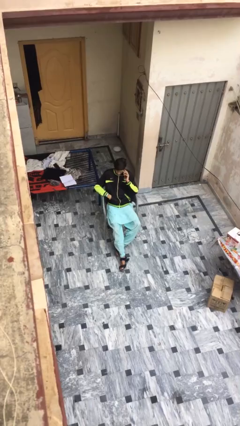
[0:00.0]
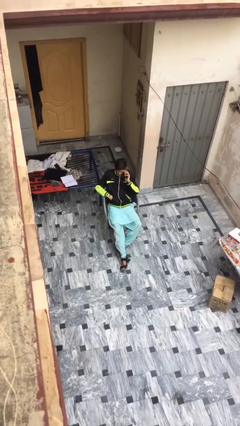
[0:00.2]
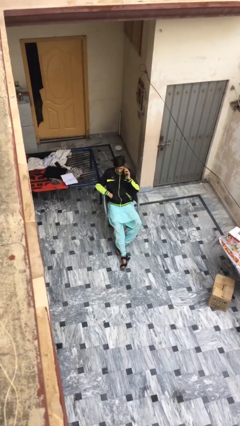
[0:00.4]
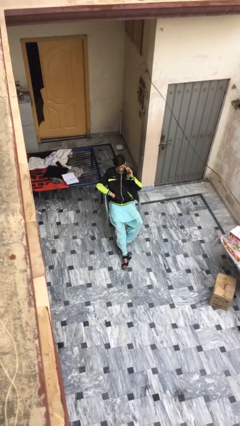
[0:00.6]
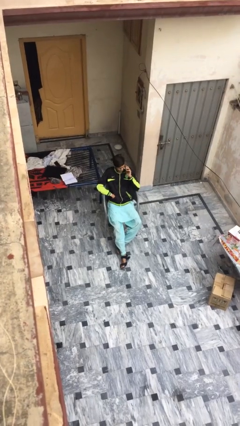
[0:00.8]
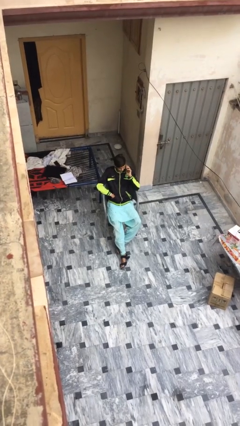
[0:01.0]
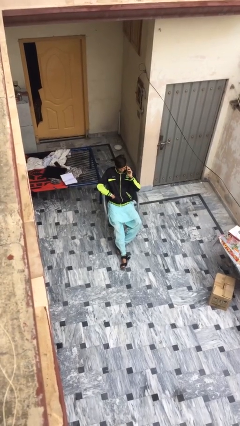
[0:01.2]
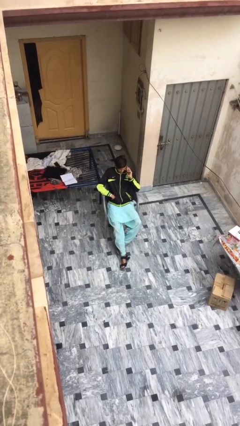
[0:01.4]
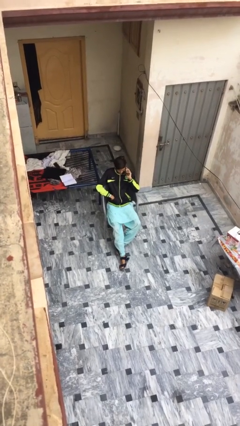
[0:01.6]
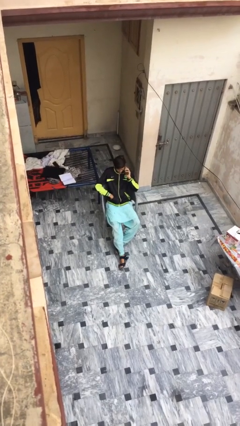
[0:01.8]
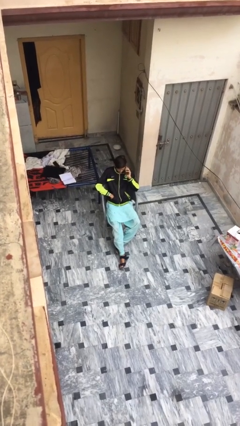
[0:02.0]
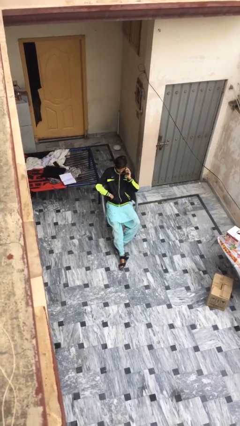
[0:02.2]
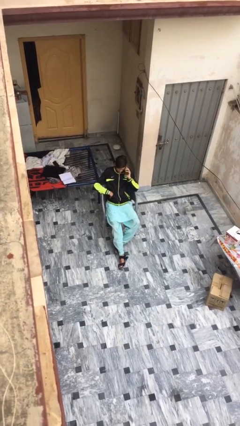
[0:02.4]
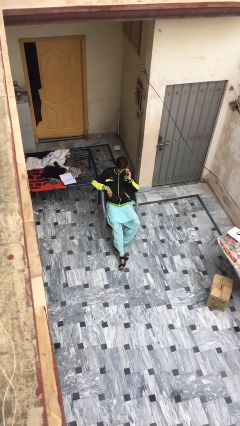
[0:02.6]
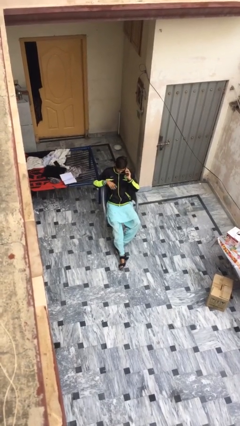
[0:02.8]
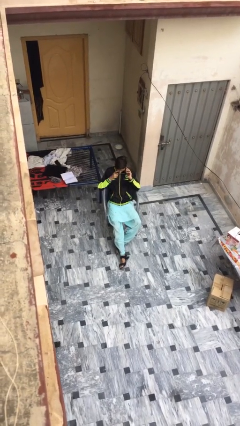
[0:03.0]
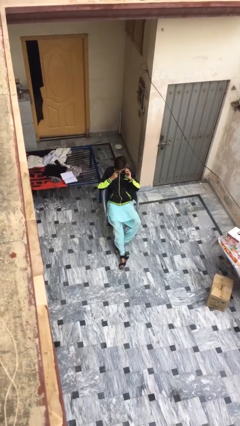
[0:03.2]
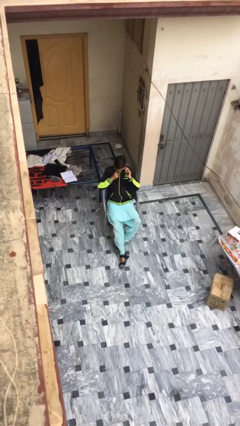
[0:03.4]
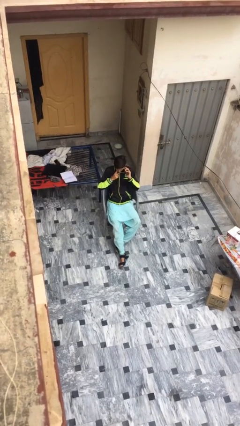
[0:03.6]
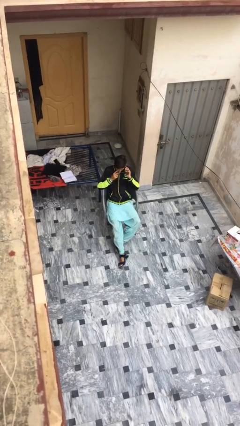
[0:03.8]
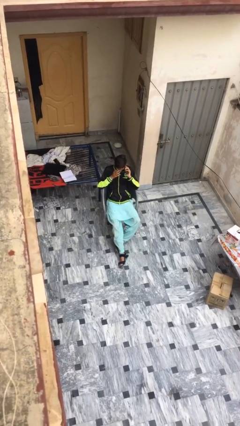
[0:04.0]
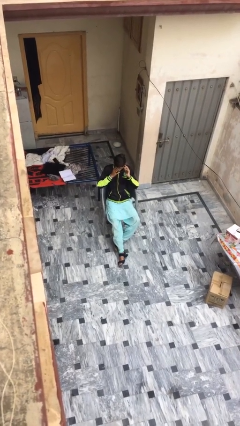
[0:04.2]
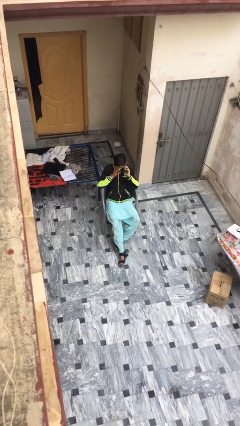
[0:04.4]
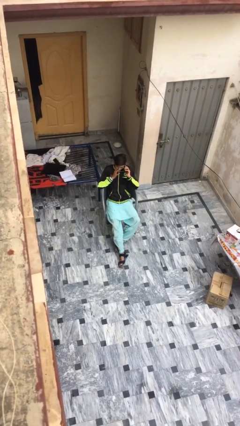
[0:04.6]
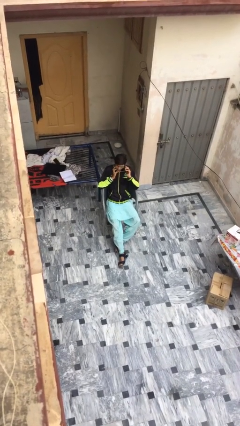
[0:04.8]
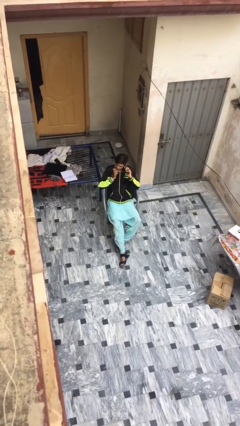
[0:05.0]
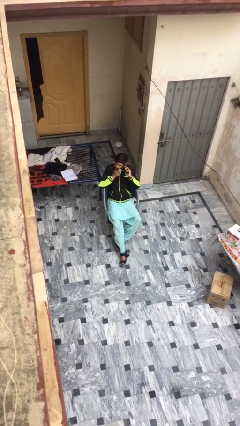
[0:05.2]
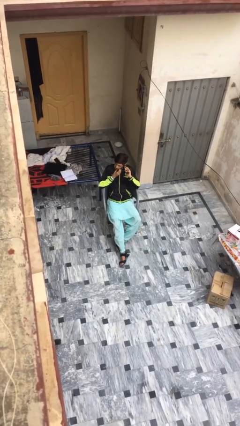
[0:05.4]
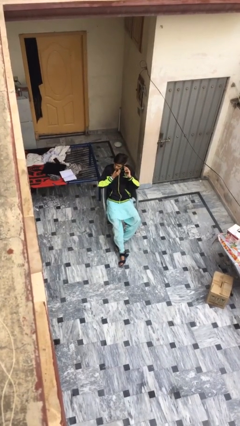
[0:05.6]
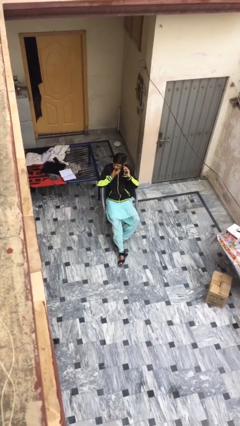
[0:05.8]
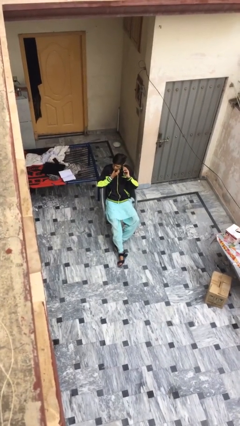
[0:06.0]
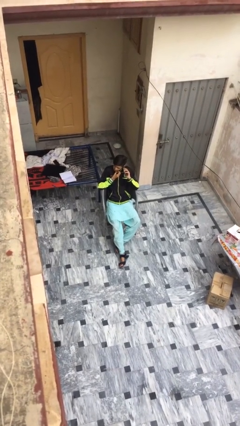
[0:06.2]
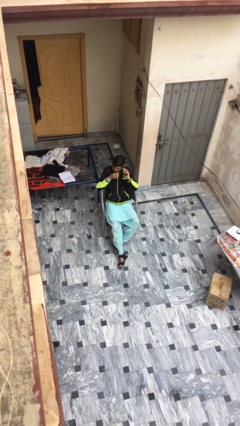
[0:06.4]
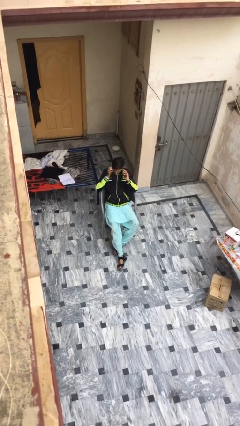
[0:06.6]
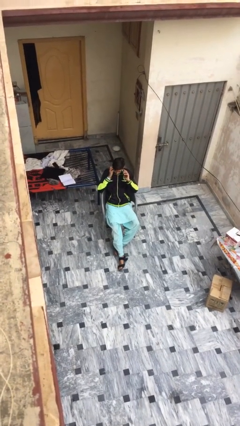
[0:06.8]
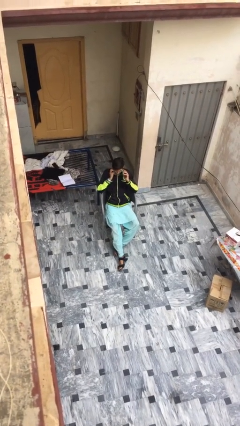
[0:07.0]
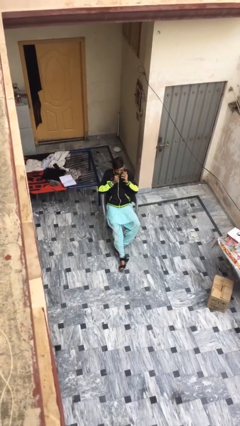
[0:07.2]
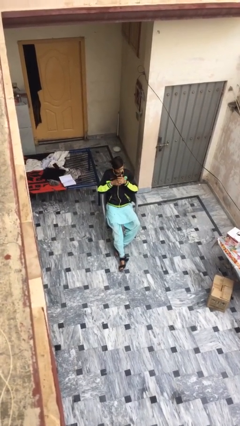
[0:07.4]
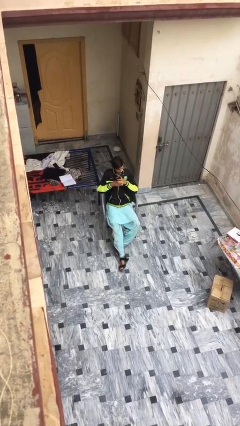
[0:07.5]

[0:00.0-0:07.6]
person talks on phone

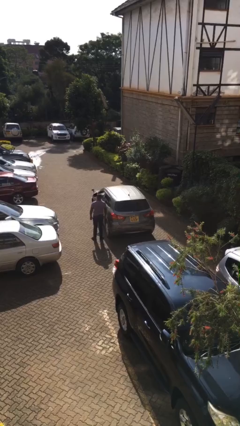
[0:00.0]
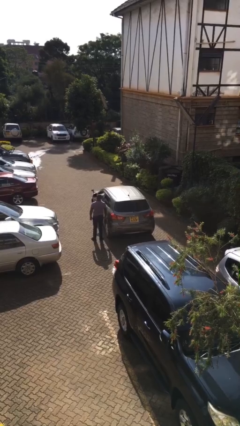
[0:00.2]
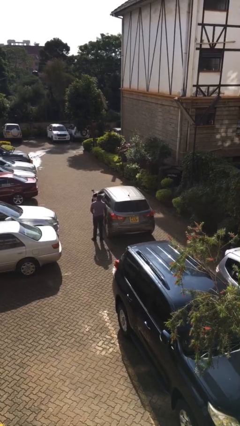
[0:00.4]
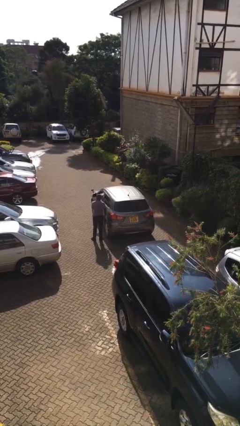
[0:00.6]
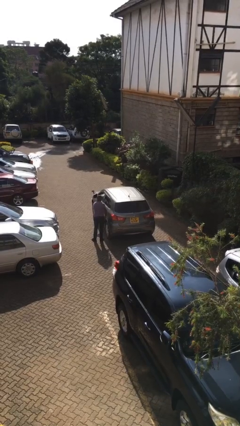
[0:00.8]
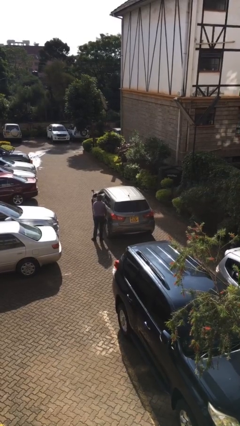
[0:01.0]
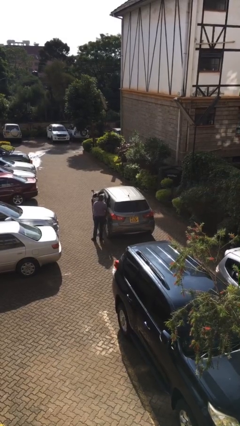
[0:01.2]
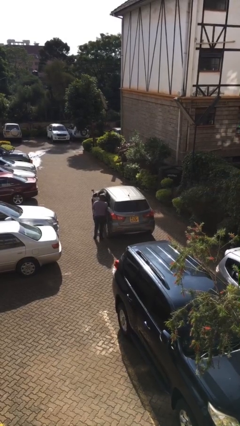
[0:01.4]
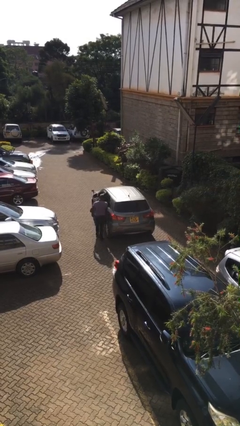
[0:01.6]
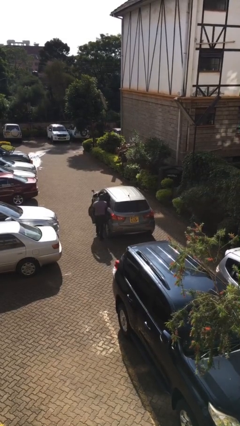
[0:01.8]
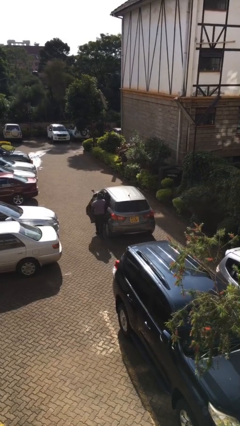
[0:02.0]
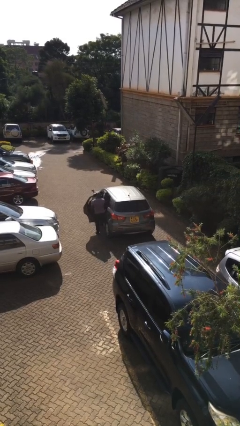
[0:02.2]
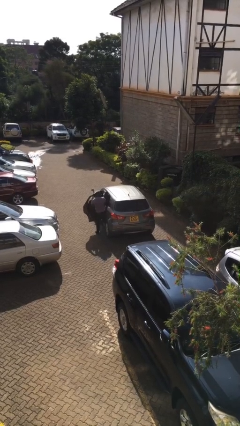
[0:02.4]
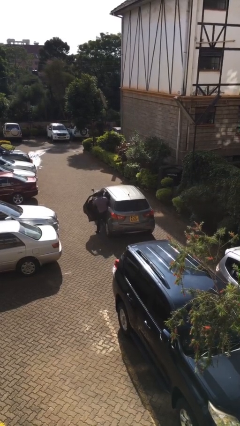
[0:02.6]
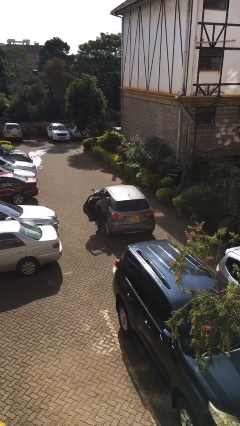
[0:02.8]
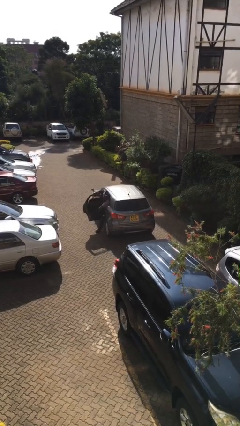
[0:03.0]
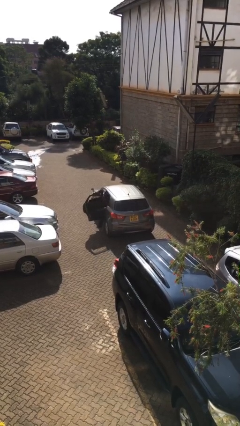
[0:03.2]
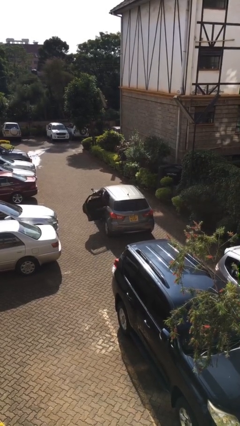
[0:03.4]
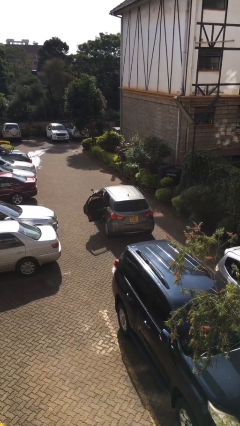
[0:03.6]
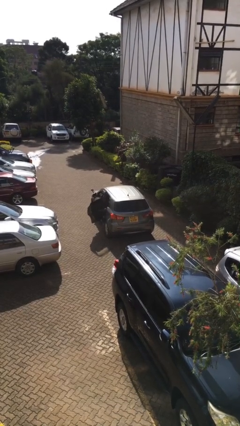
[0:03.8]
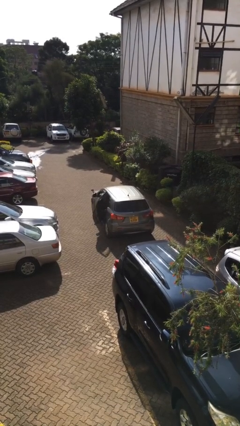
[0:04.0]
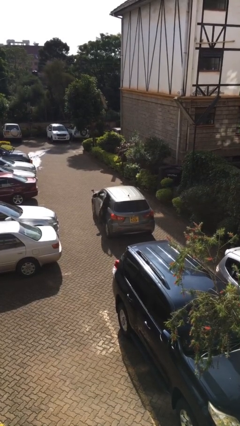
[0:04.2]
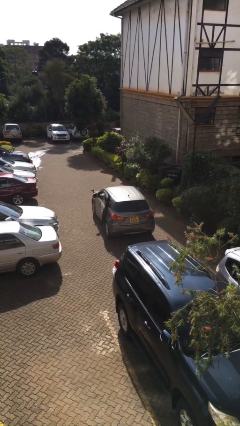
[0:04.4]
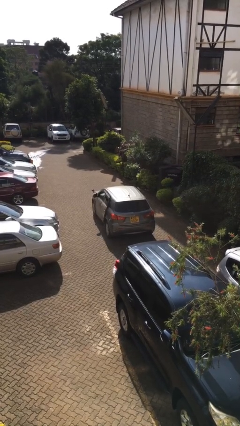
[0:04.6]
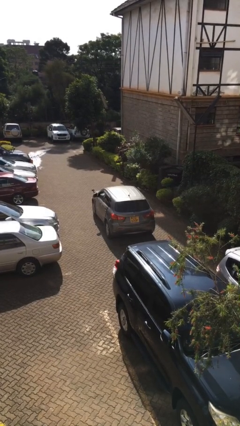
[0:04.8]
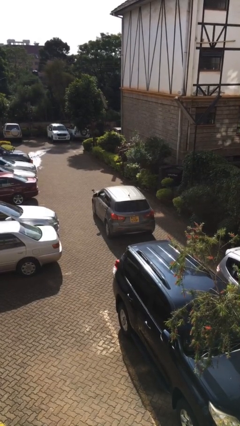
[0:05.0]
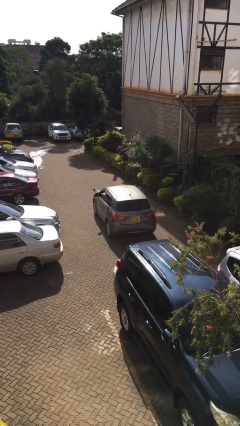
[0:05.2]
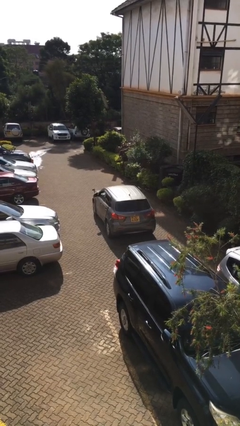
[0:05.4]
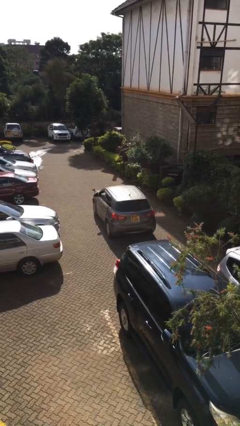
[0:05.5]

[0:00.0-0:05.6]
car picks up person

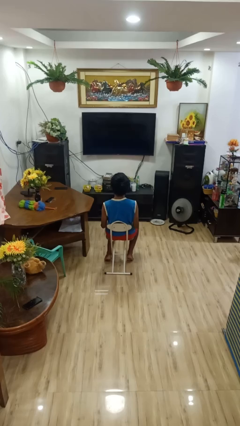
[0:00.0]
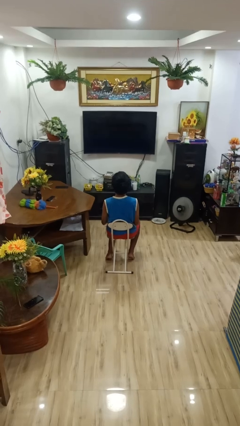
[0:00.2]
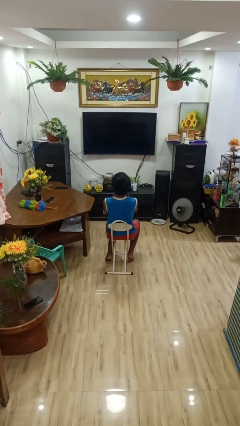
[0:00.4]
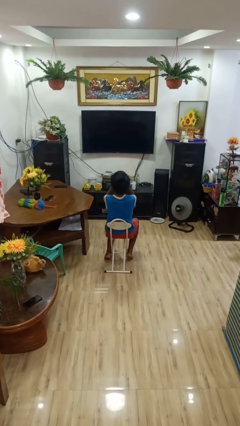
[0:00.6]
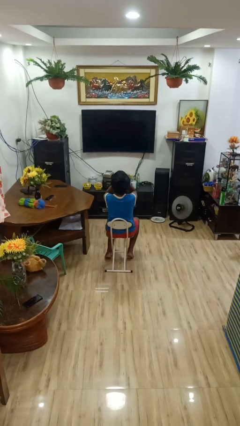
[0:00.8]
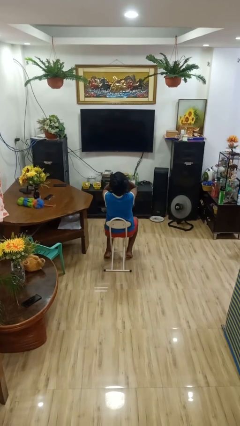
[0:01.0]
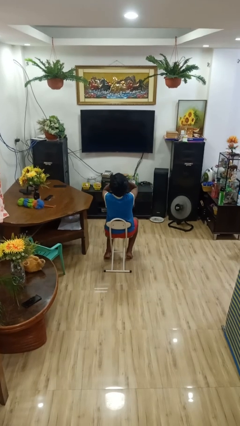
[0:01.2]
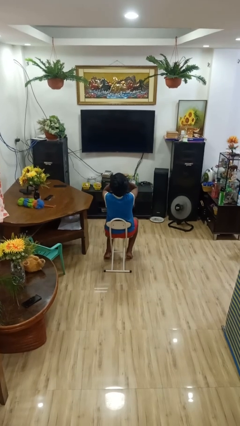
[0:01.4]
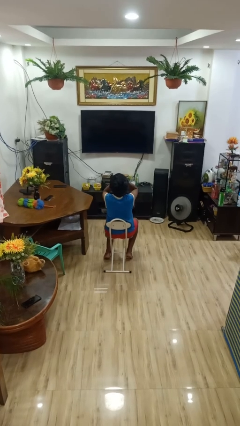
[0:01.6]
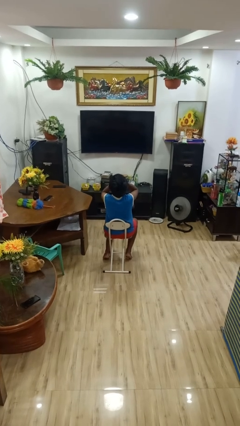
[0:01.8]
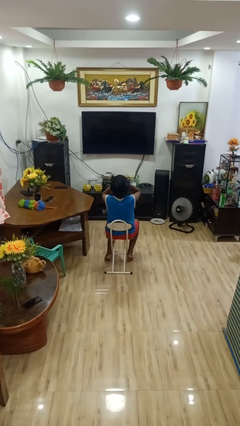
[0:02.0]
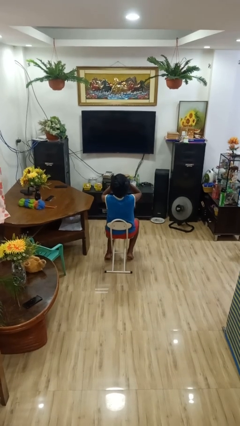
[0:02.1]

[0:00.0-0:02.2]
person covers face with hands

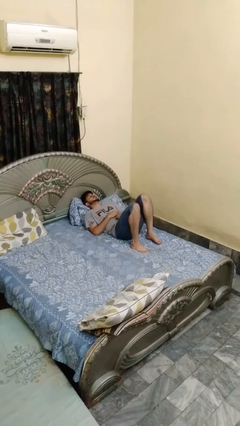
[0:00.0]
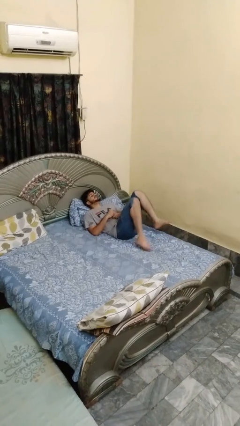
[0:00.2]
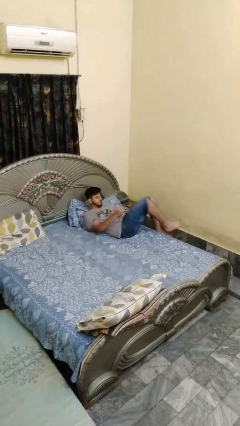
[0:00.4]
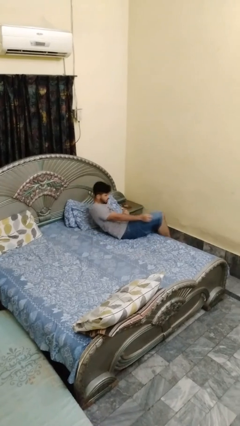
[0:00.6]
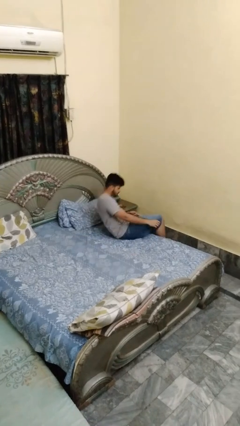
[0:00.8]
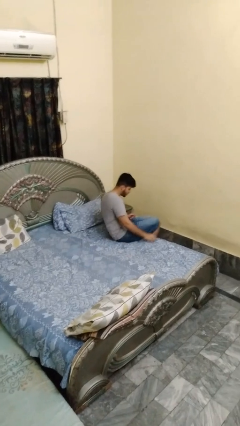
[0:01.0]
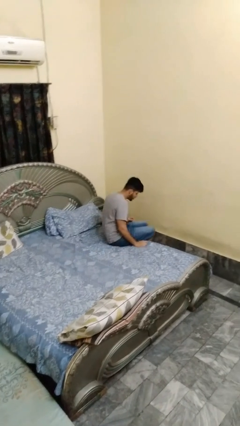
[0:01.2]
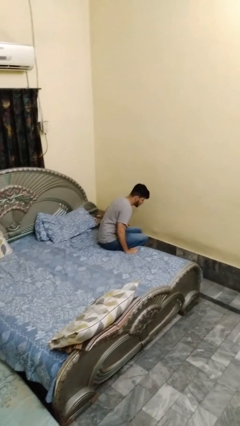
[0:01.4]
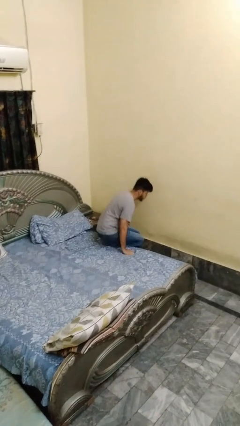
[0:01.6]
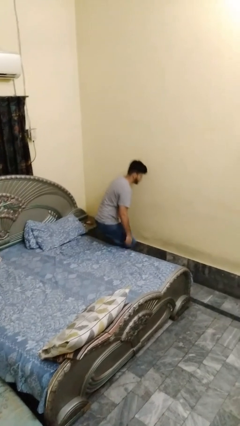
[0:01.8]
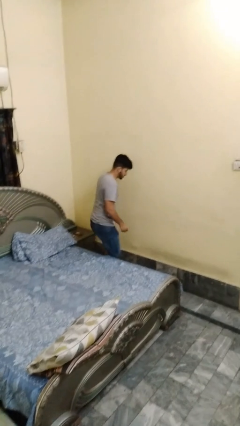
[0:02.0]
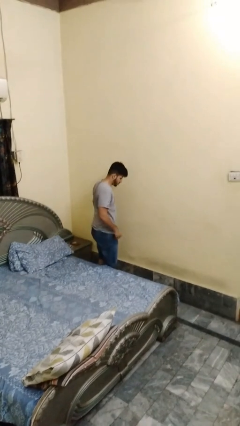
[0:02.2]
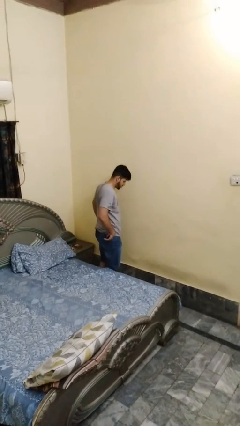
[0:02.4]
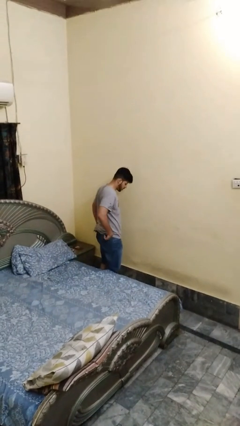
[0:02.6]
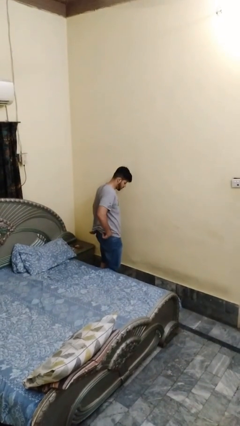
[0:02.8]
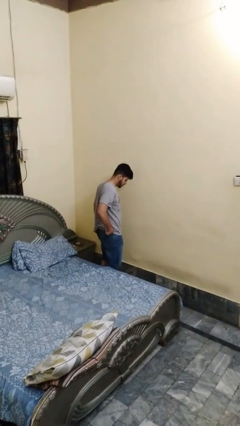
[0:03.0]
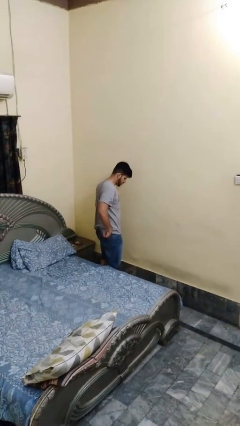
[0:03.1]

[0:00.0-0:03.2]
person stands up
